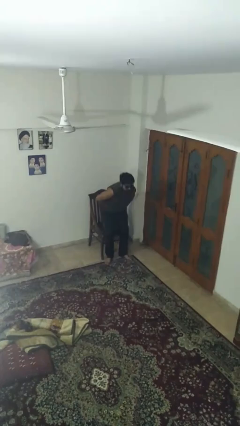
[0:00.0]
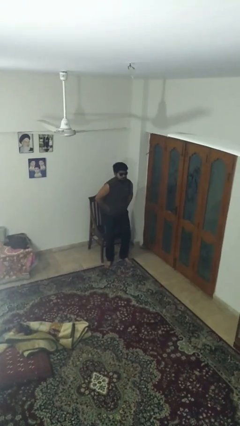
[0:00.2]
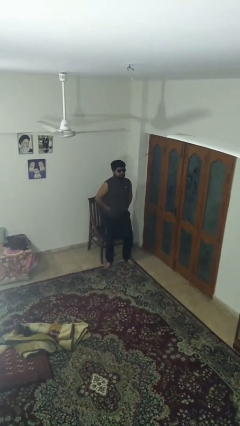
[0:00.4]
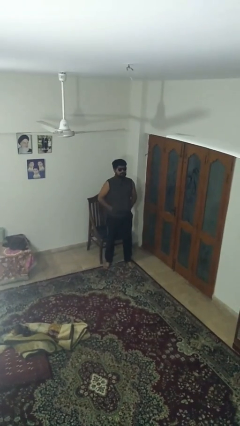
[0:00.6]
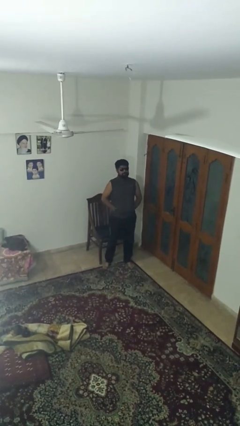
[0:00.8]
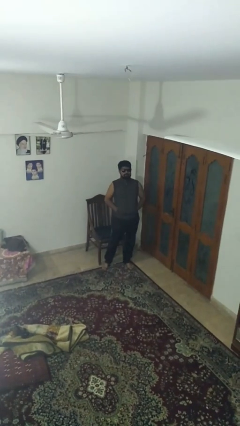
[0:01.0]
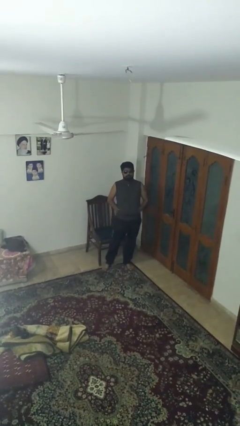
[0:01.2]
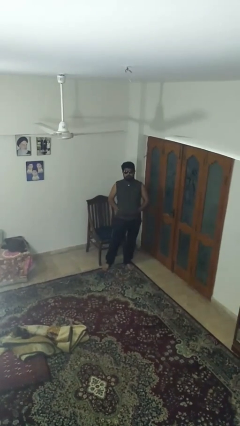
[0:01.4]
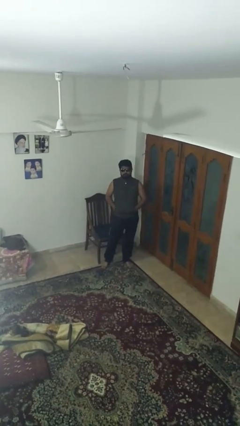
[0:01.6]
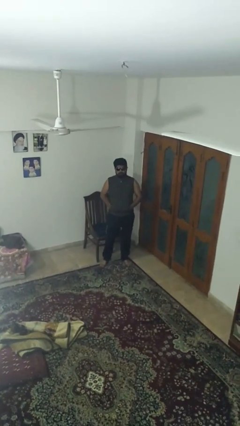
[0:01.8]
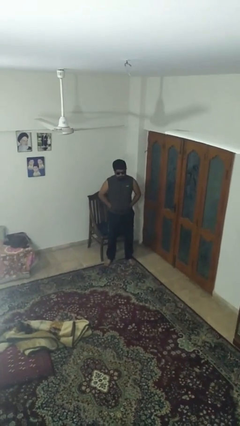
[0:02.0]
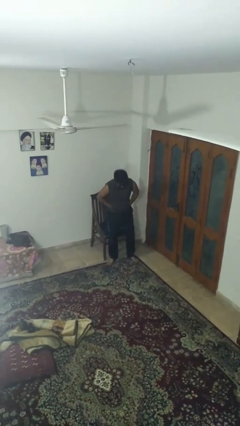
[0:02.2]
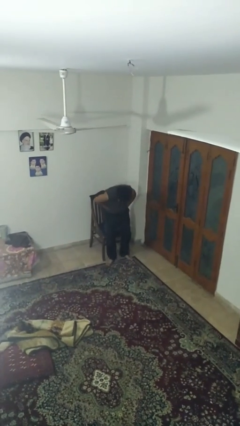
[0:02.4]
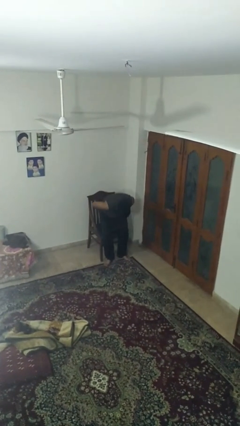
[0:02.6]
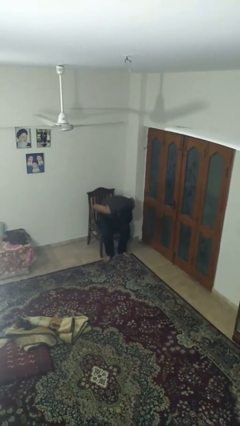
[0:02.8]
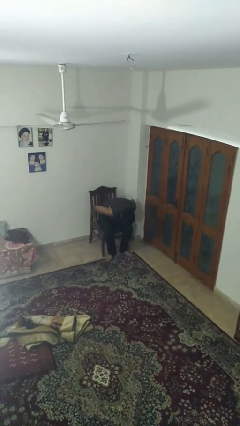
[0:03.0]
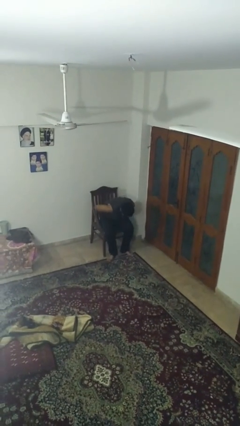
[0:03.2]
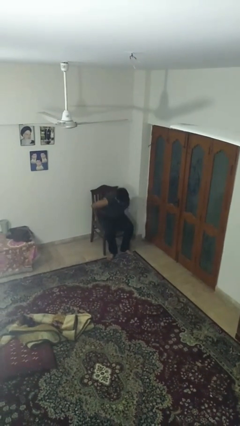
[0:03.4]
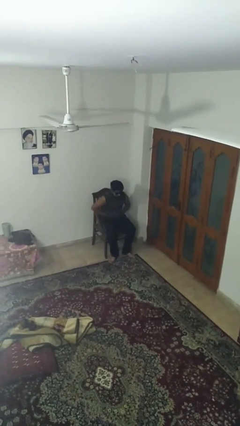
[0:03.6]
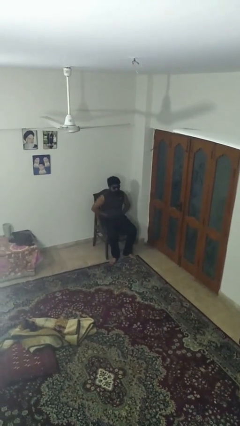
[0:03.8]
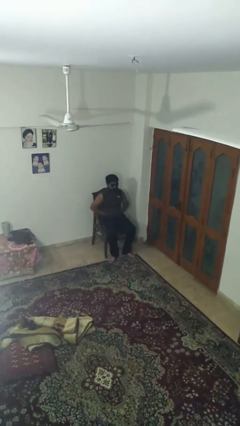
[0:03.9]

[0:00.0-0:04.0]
person sits down

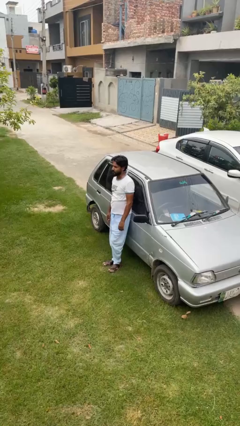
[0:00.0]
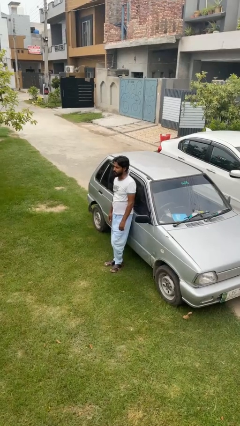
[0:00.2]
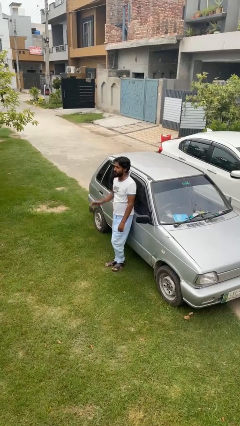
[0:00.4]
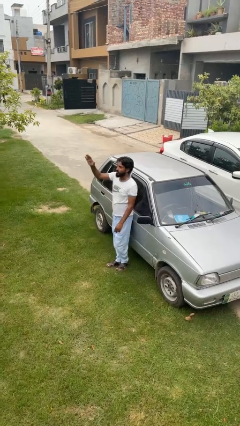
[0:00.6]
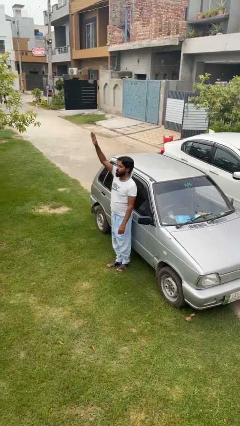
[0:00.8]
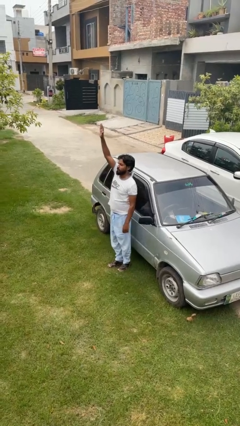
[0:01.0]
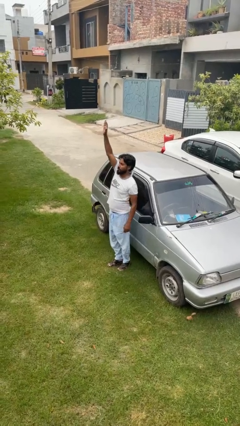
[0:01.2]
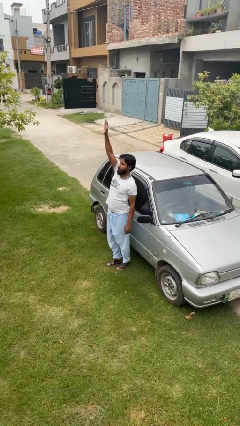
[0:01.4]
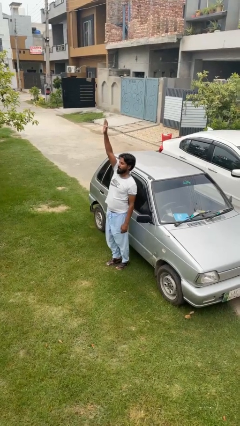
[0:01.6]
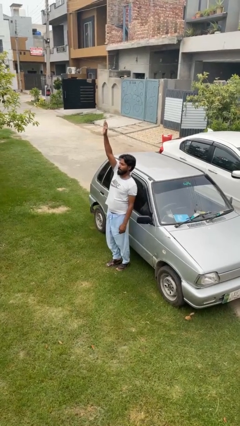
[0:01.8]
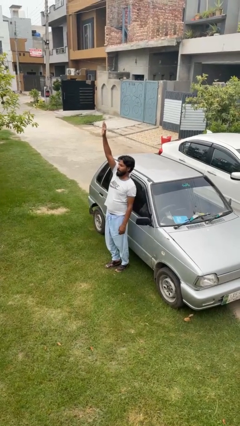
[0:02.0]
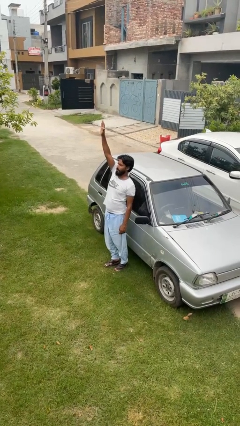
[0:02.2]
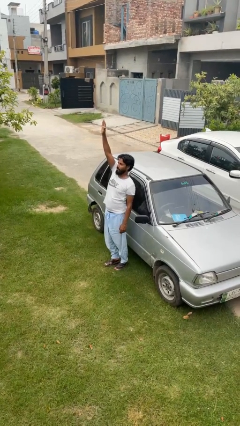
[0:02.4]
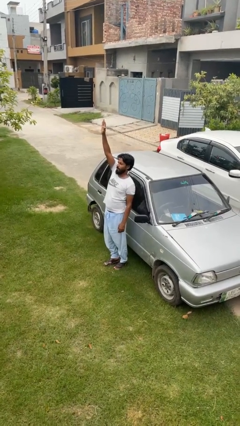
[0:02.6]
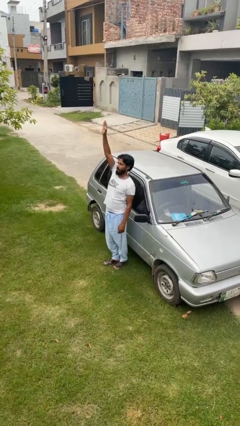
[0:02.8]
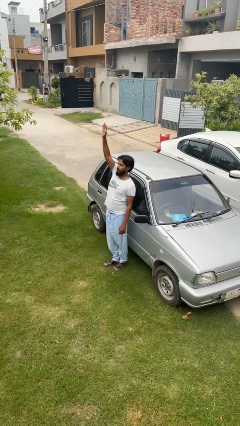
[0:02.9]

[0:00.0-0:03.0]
person gestures raise hand

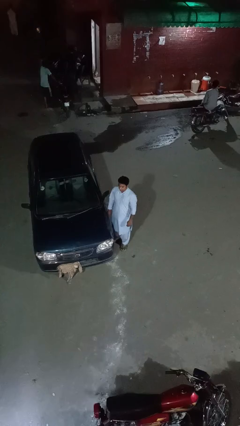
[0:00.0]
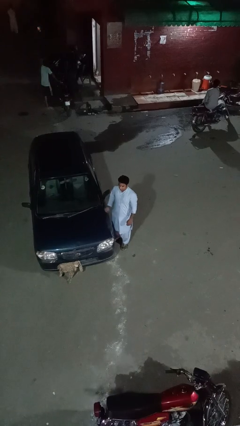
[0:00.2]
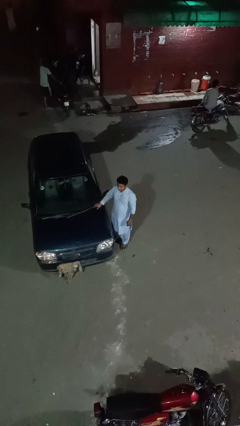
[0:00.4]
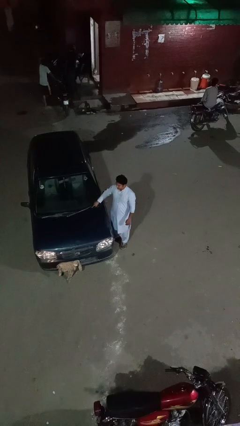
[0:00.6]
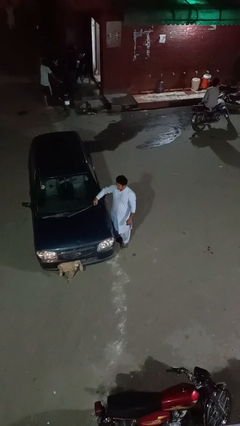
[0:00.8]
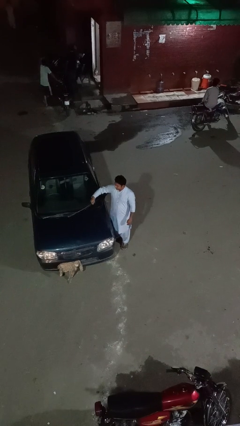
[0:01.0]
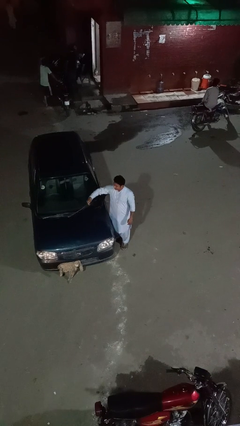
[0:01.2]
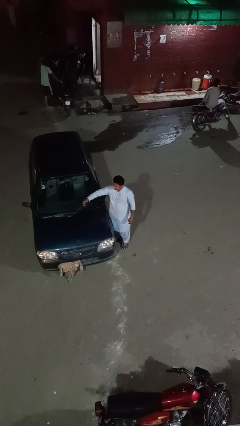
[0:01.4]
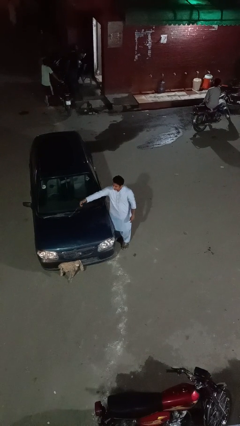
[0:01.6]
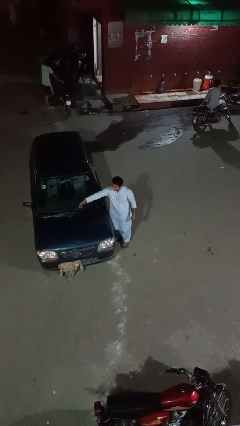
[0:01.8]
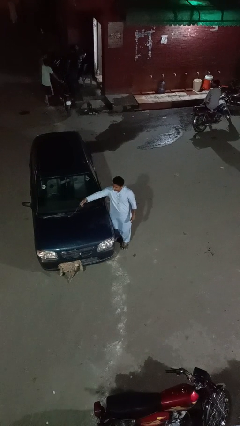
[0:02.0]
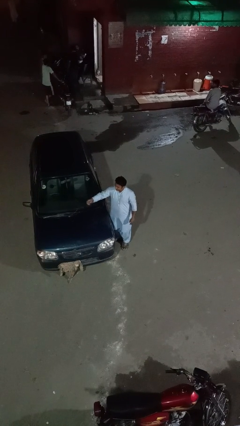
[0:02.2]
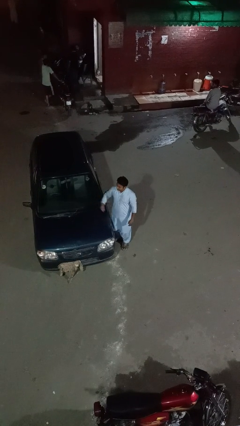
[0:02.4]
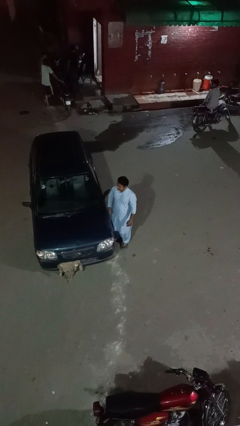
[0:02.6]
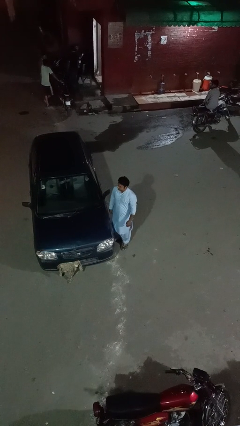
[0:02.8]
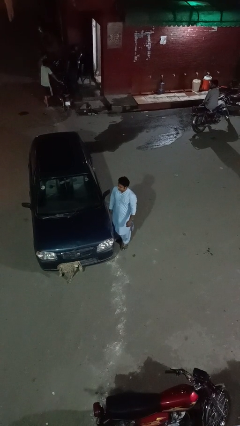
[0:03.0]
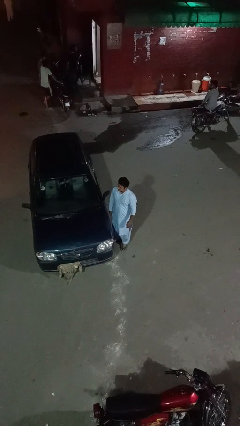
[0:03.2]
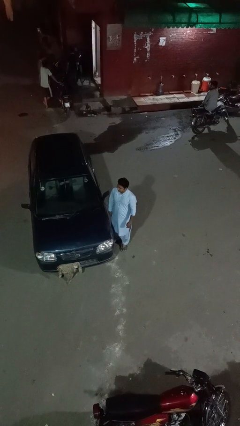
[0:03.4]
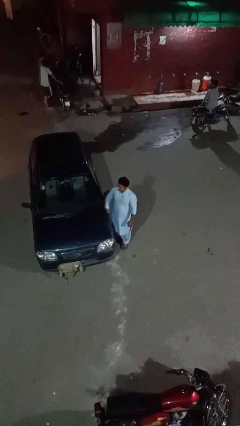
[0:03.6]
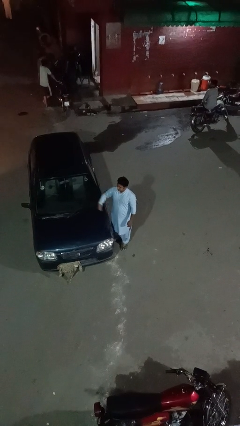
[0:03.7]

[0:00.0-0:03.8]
person flips up car wipers

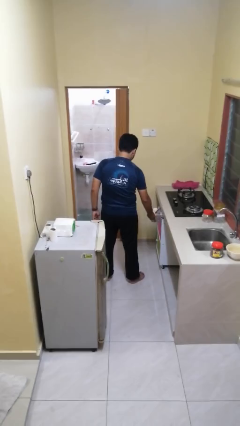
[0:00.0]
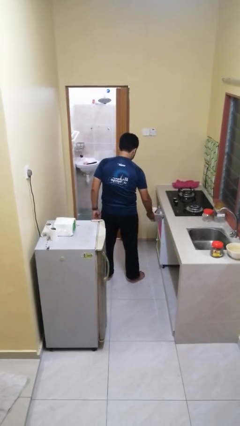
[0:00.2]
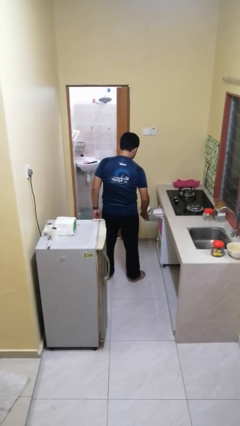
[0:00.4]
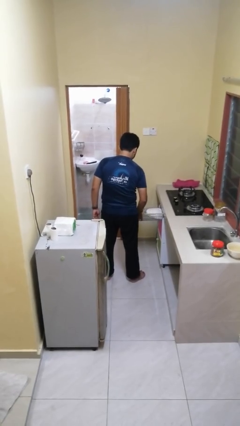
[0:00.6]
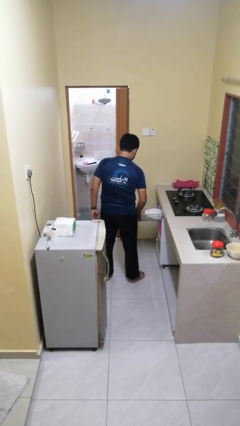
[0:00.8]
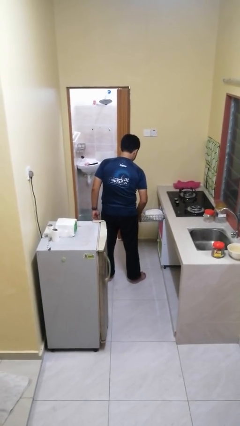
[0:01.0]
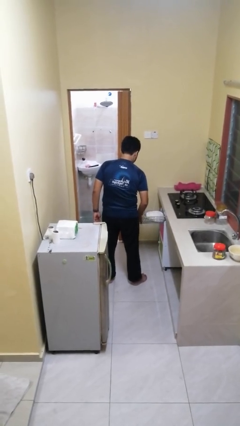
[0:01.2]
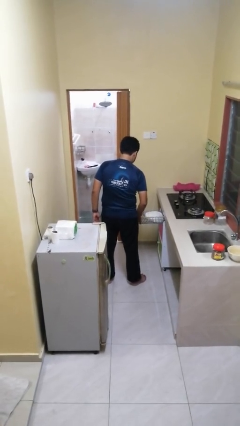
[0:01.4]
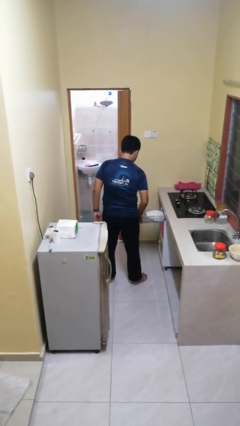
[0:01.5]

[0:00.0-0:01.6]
person opens kitchen drawer

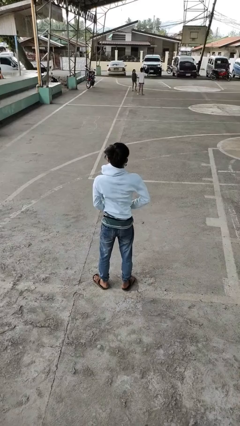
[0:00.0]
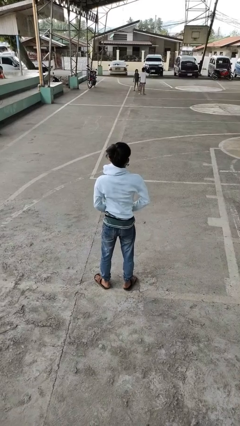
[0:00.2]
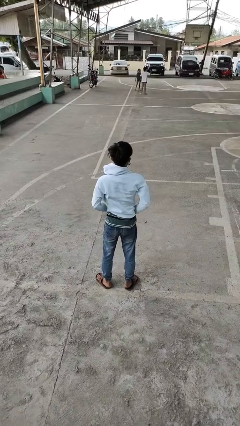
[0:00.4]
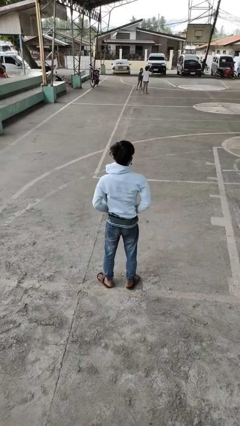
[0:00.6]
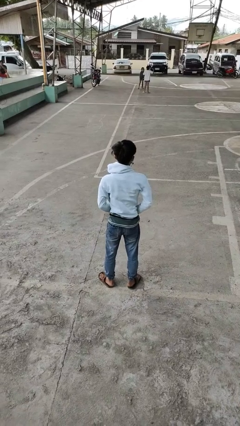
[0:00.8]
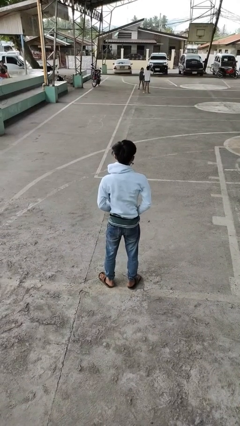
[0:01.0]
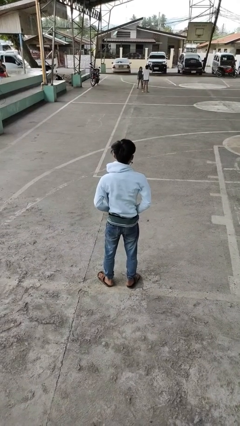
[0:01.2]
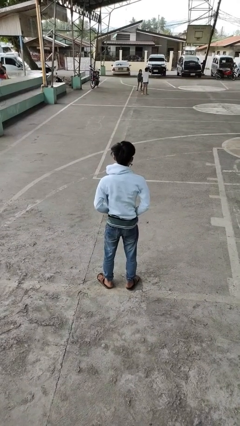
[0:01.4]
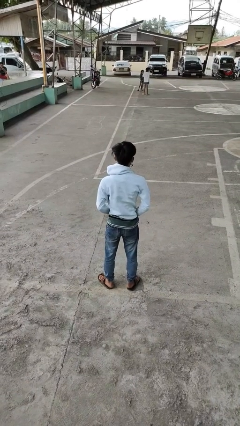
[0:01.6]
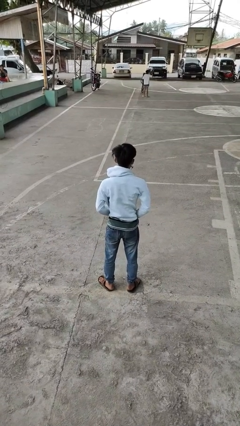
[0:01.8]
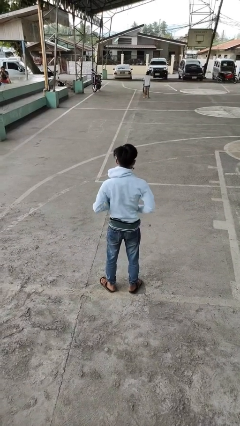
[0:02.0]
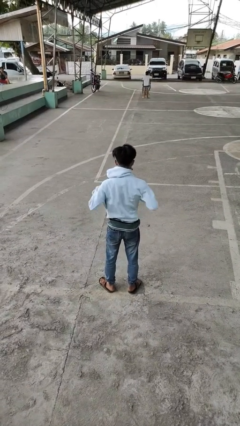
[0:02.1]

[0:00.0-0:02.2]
person unzips jacket

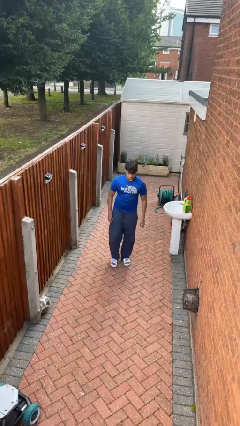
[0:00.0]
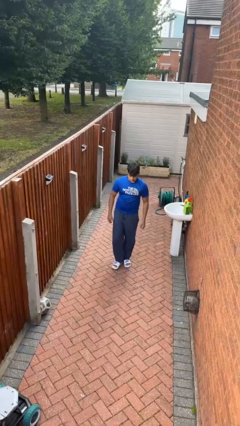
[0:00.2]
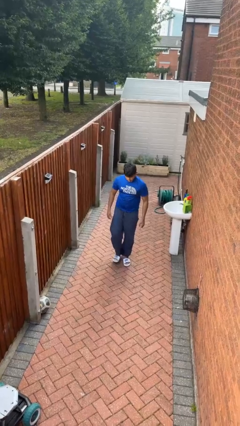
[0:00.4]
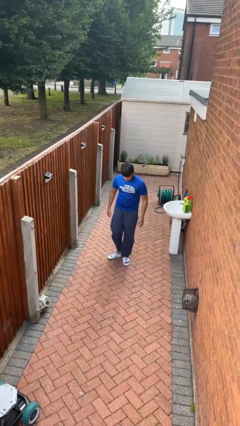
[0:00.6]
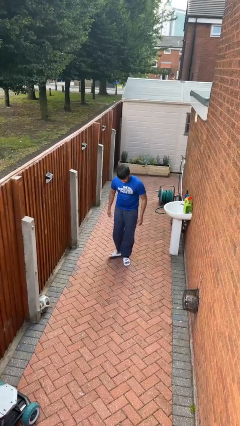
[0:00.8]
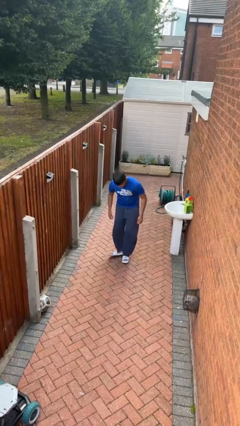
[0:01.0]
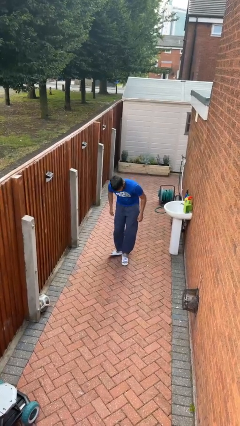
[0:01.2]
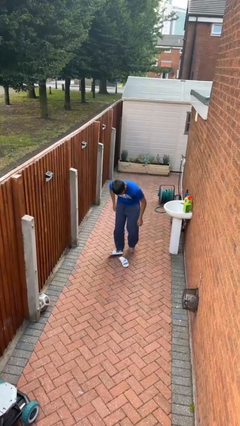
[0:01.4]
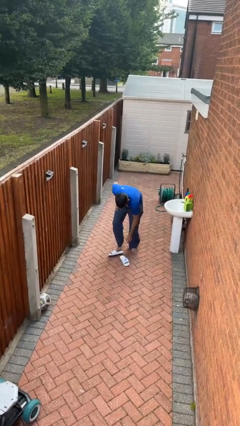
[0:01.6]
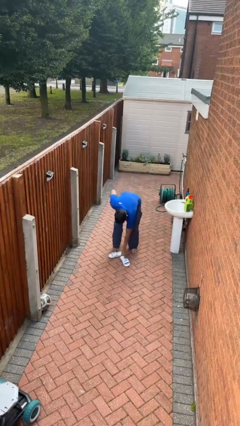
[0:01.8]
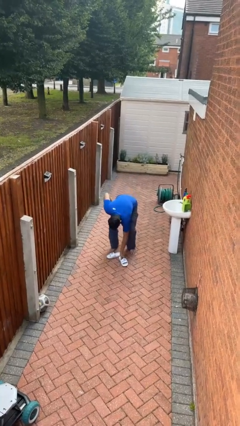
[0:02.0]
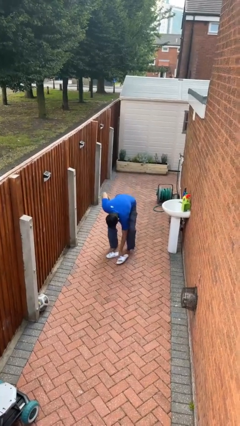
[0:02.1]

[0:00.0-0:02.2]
person takes off shoes
